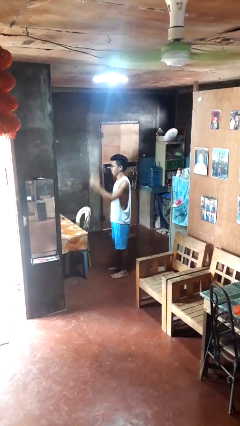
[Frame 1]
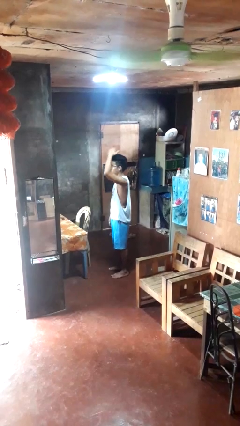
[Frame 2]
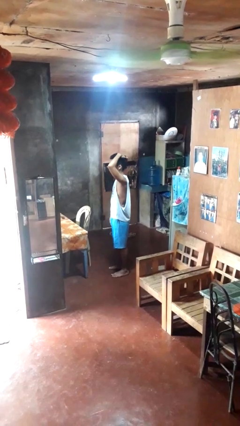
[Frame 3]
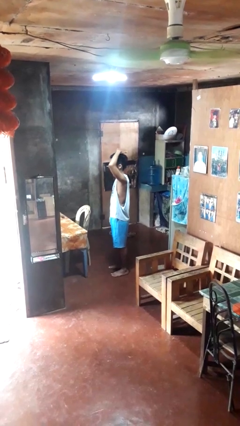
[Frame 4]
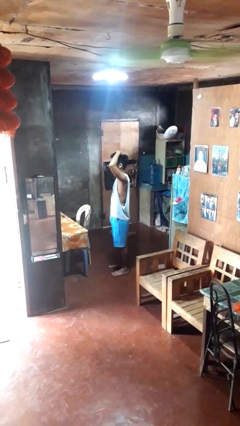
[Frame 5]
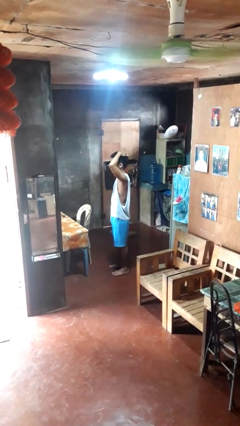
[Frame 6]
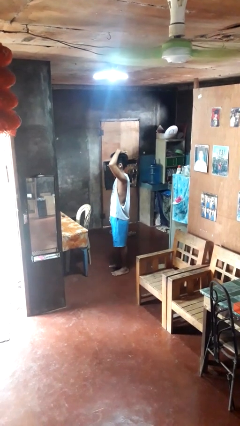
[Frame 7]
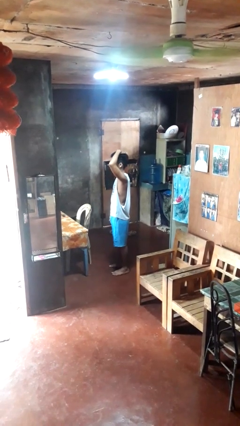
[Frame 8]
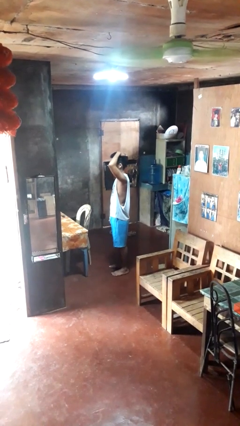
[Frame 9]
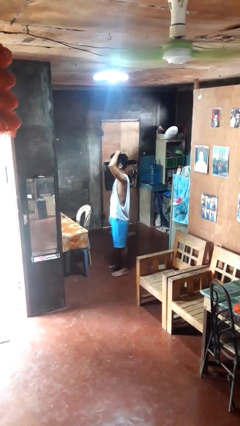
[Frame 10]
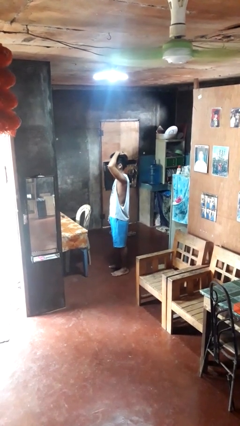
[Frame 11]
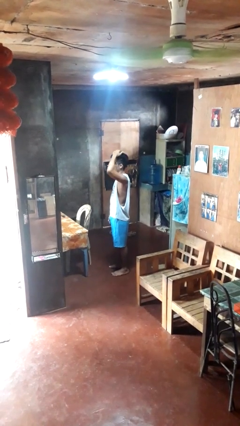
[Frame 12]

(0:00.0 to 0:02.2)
person pats head

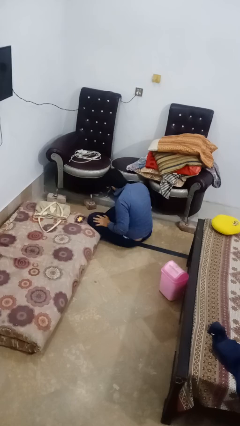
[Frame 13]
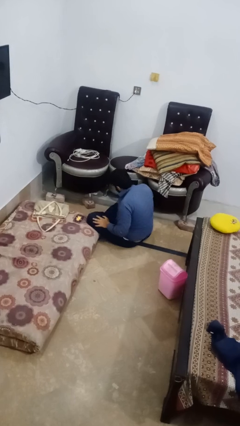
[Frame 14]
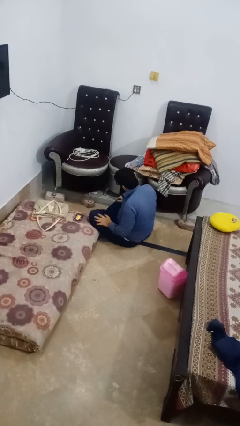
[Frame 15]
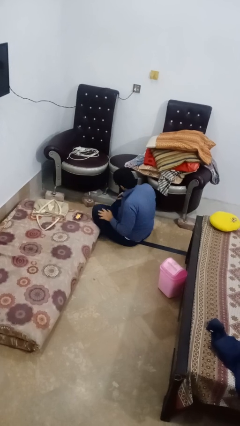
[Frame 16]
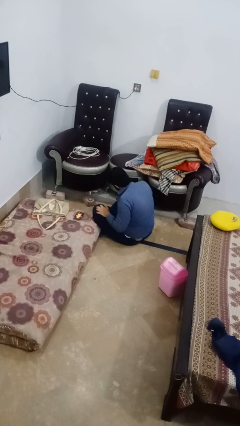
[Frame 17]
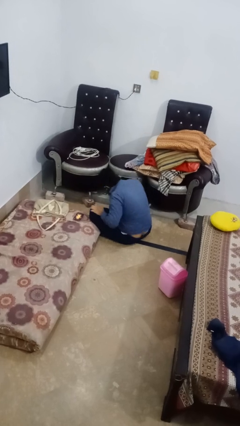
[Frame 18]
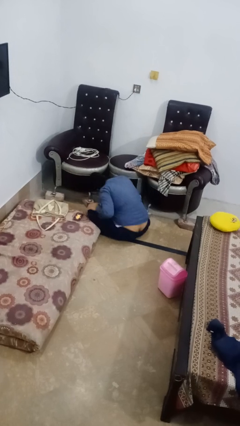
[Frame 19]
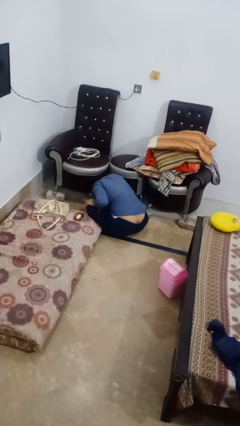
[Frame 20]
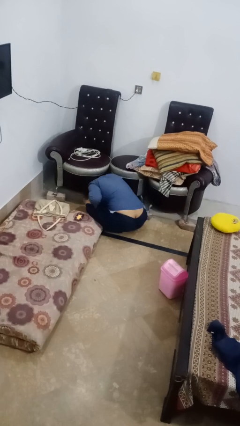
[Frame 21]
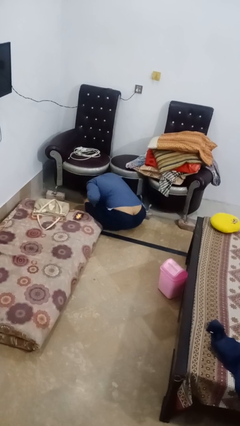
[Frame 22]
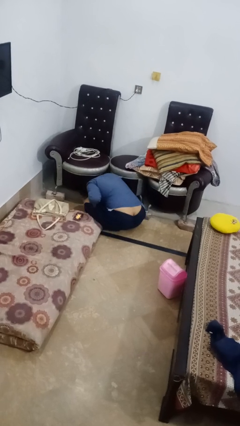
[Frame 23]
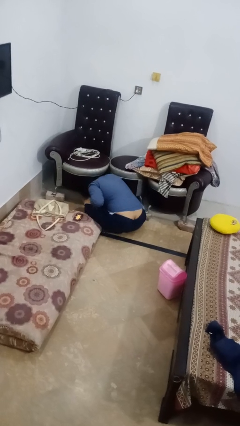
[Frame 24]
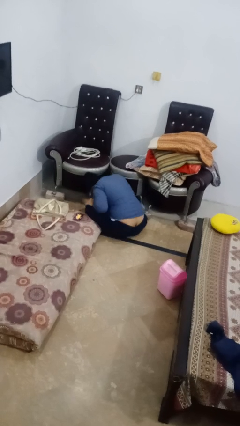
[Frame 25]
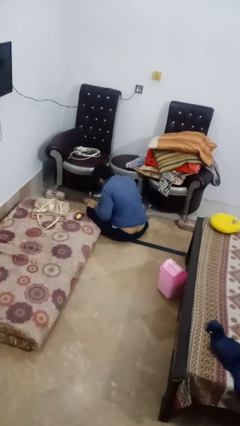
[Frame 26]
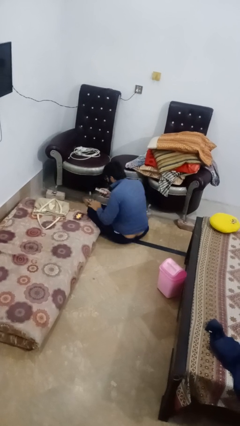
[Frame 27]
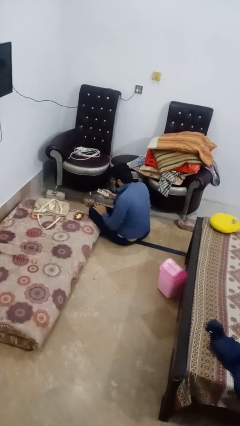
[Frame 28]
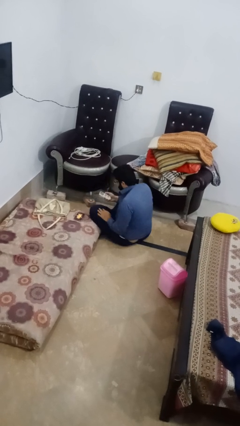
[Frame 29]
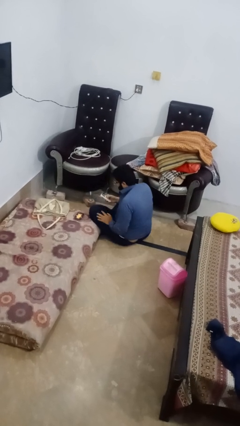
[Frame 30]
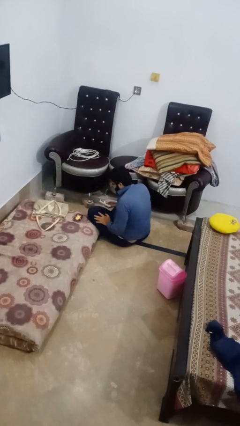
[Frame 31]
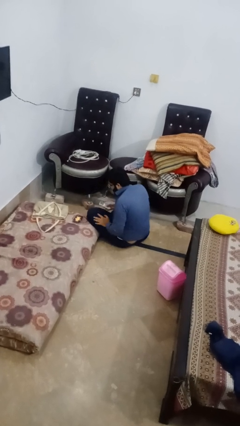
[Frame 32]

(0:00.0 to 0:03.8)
person searches under couch

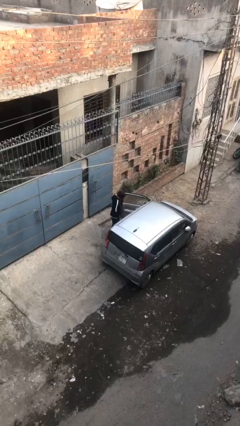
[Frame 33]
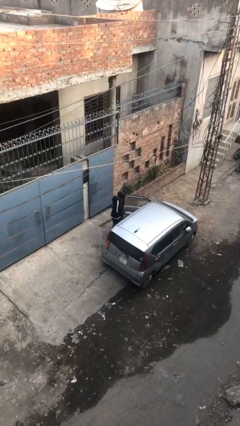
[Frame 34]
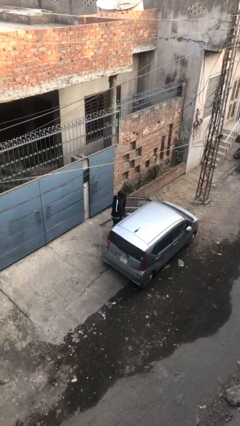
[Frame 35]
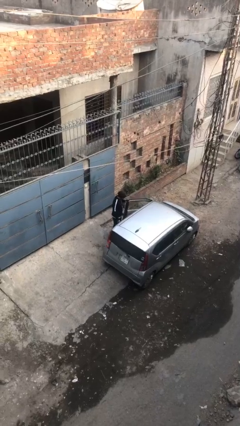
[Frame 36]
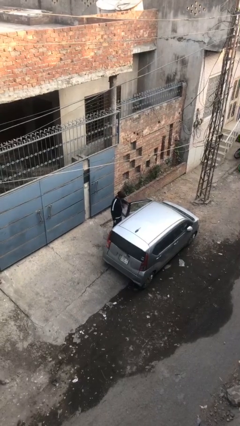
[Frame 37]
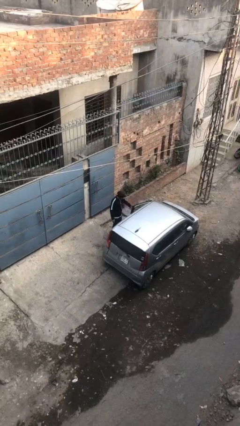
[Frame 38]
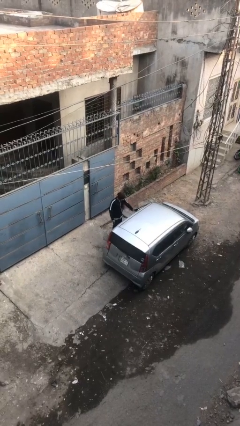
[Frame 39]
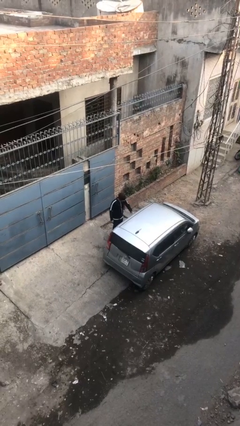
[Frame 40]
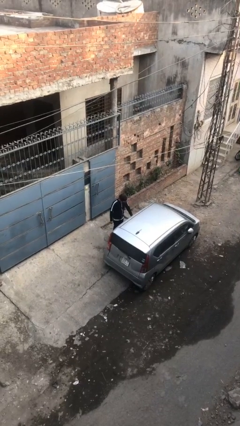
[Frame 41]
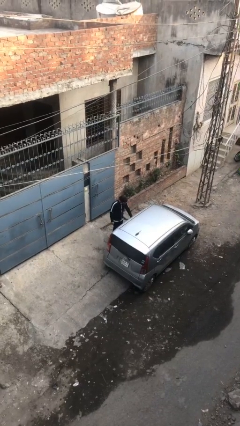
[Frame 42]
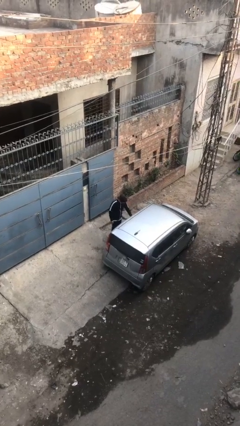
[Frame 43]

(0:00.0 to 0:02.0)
person closes car door

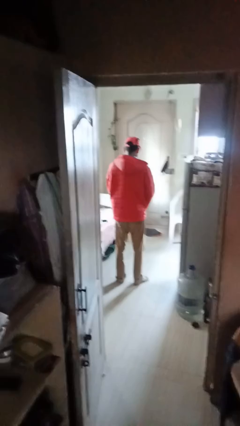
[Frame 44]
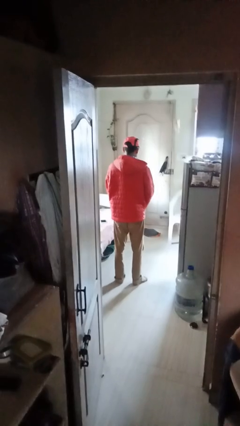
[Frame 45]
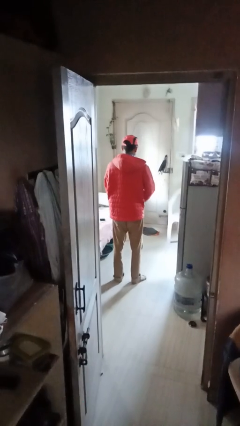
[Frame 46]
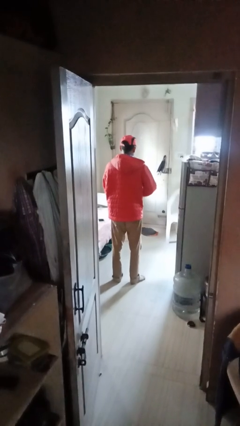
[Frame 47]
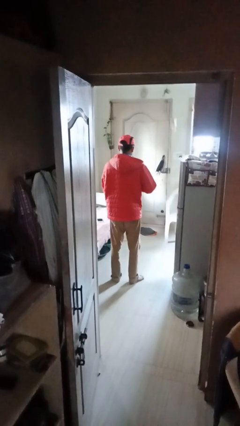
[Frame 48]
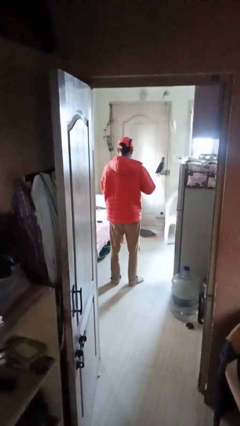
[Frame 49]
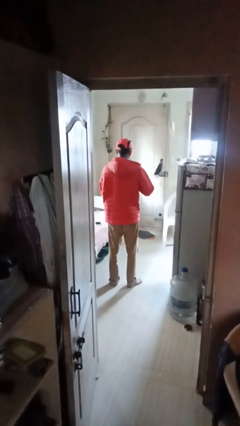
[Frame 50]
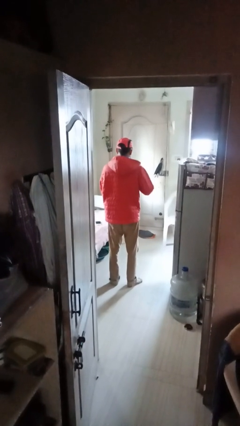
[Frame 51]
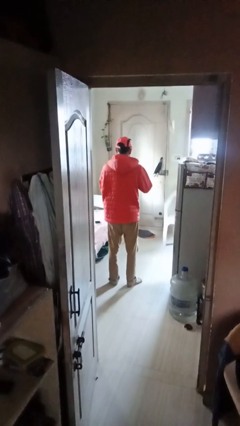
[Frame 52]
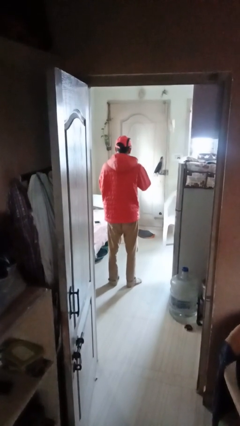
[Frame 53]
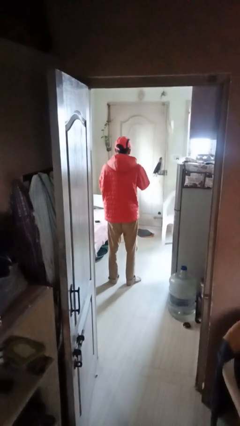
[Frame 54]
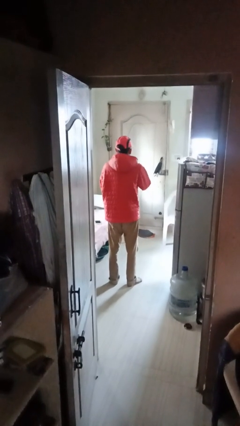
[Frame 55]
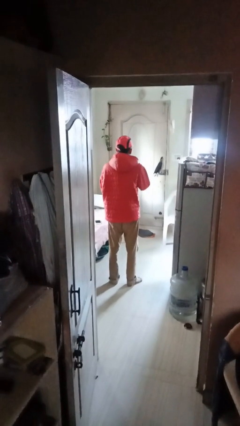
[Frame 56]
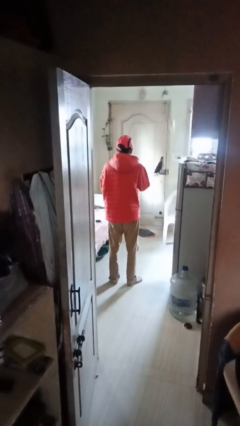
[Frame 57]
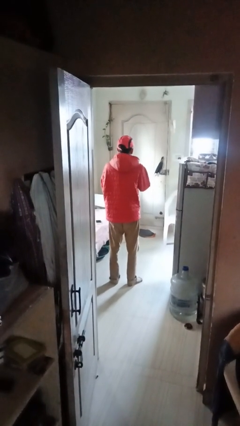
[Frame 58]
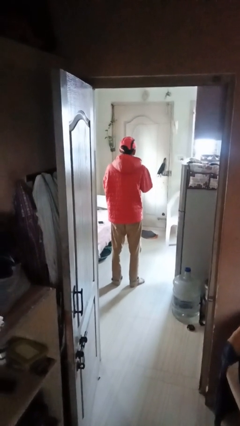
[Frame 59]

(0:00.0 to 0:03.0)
person zips up jacket

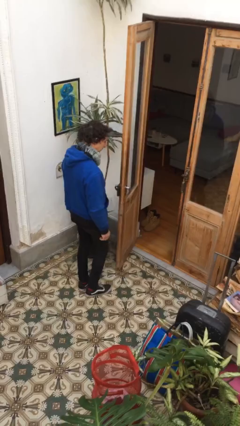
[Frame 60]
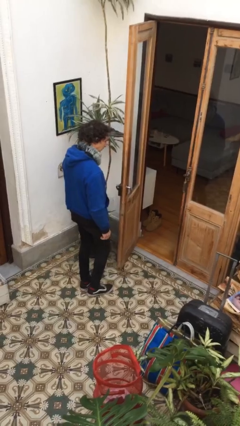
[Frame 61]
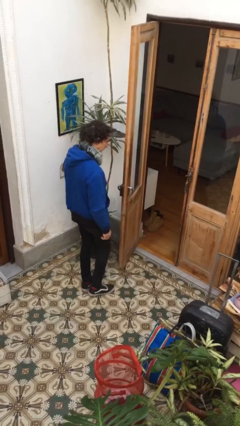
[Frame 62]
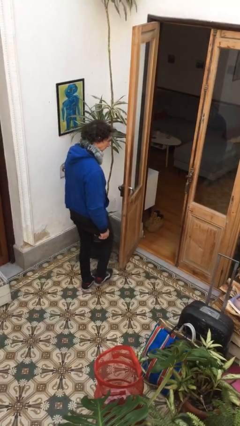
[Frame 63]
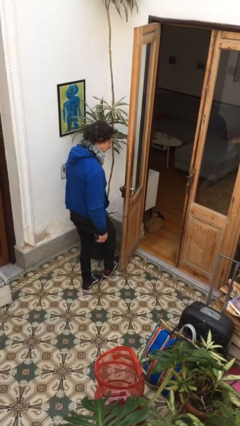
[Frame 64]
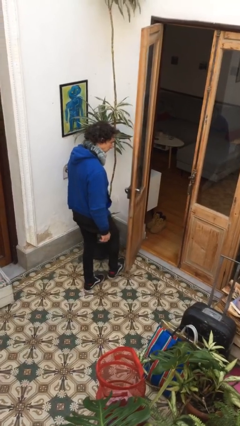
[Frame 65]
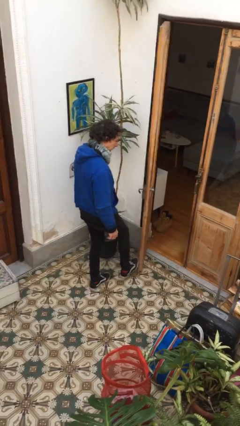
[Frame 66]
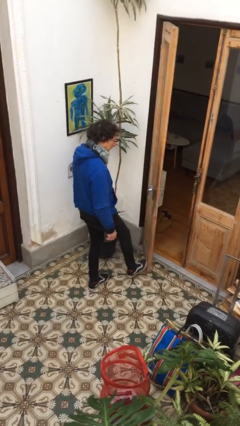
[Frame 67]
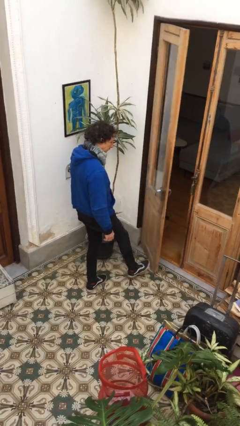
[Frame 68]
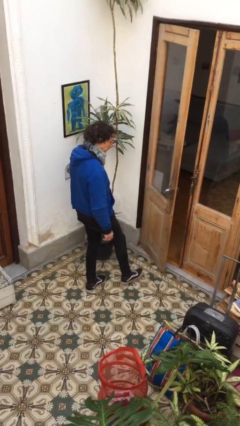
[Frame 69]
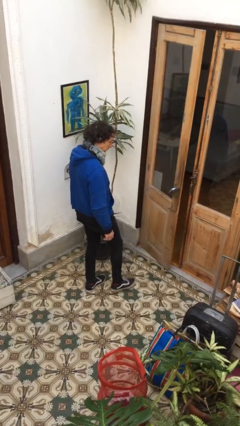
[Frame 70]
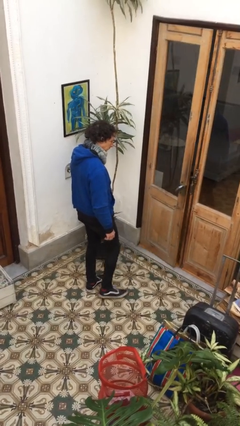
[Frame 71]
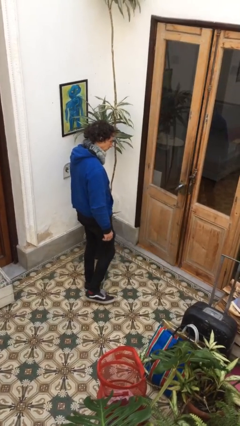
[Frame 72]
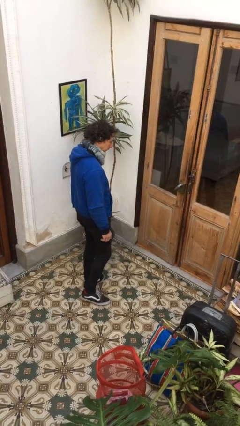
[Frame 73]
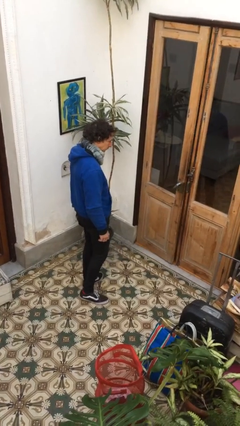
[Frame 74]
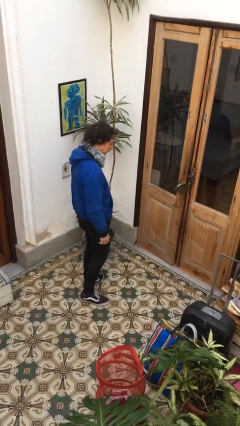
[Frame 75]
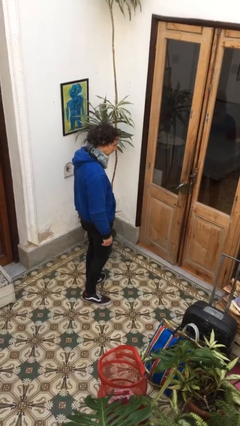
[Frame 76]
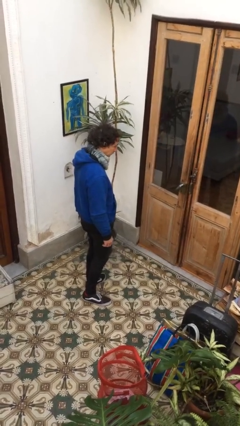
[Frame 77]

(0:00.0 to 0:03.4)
person closes door with foot

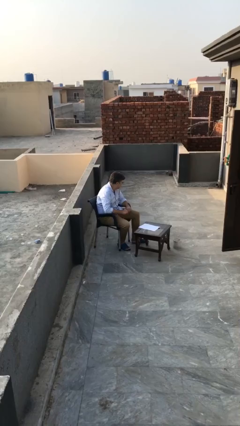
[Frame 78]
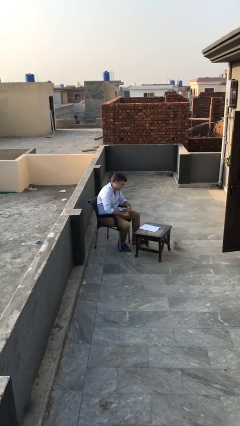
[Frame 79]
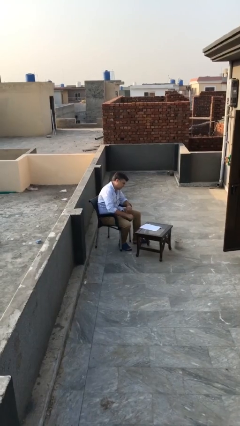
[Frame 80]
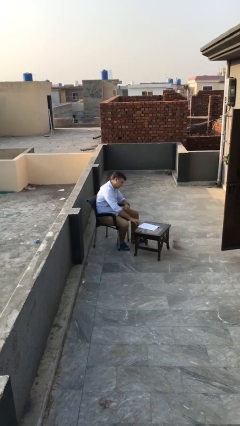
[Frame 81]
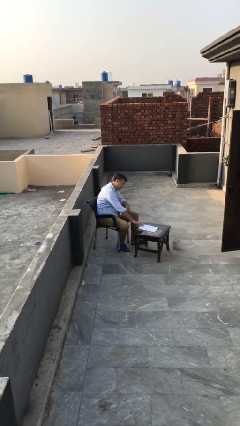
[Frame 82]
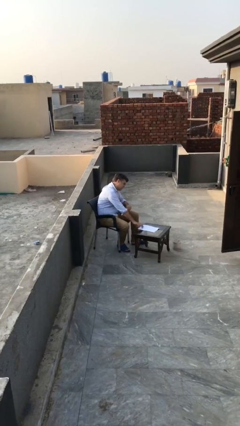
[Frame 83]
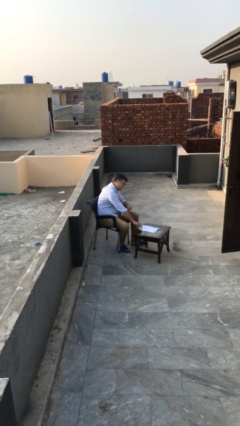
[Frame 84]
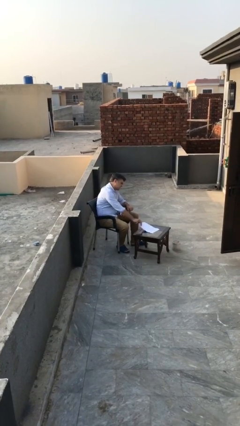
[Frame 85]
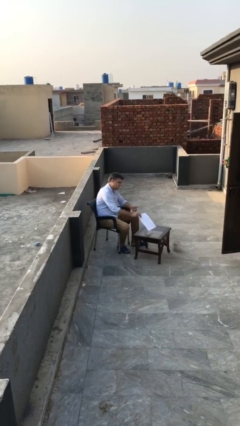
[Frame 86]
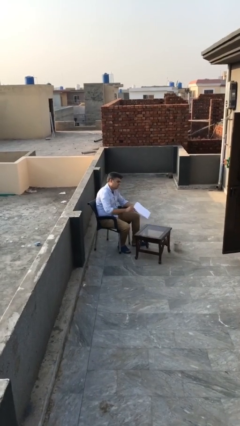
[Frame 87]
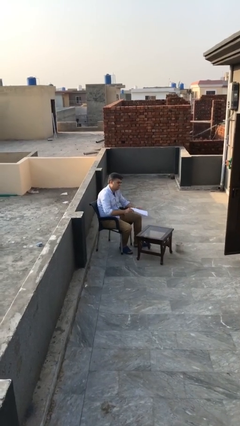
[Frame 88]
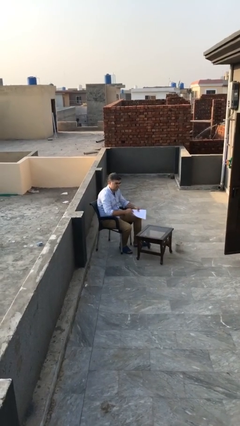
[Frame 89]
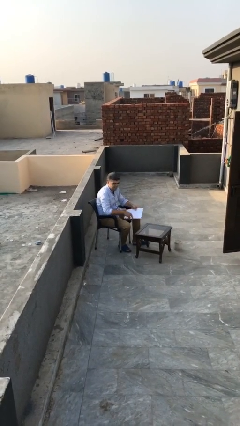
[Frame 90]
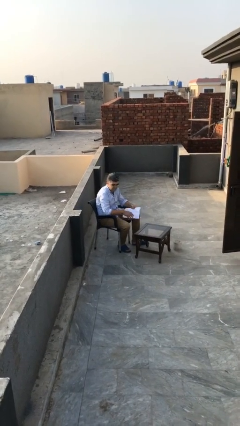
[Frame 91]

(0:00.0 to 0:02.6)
person picks up object from table

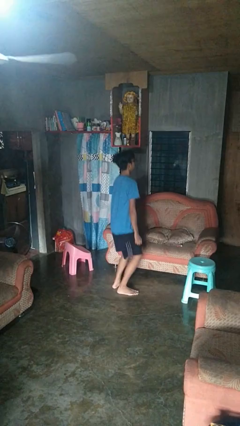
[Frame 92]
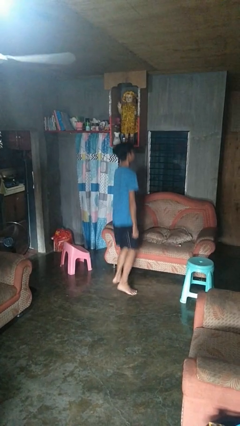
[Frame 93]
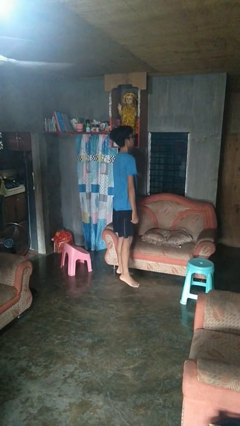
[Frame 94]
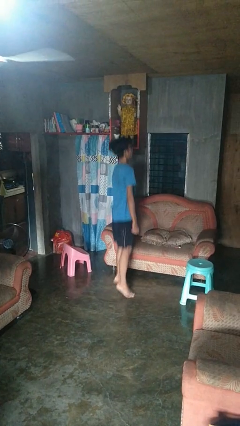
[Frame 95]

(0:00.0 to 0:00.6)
person jumps
